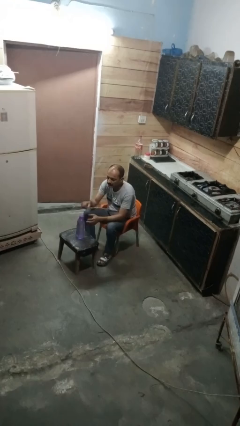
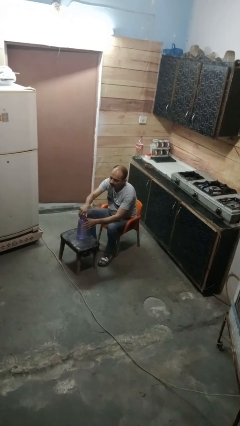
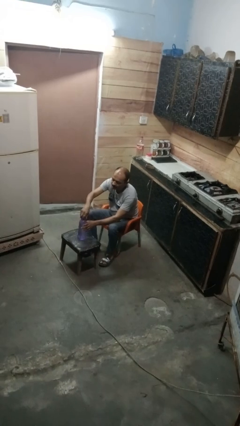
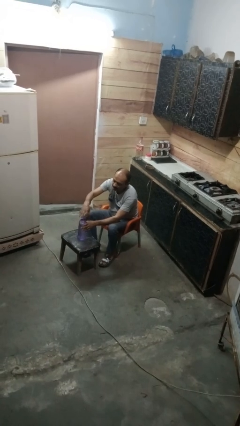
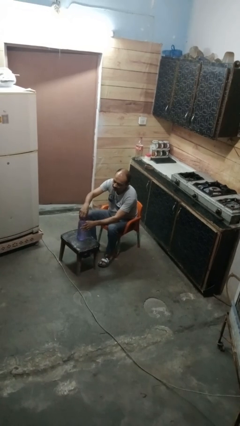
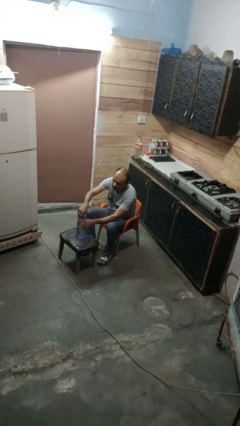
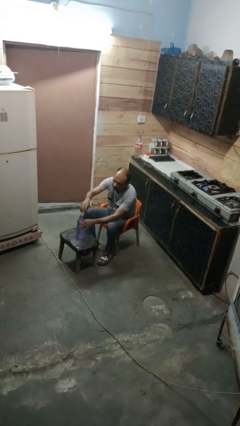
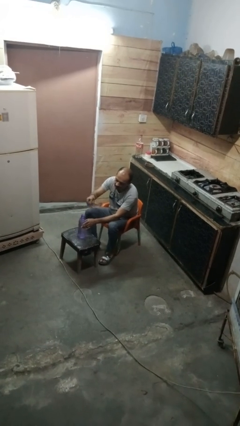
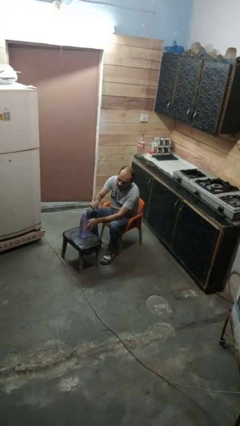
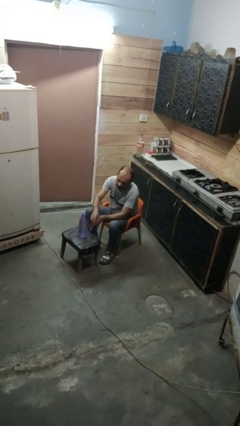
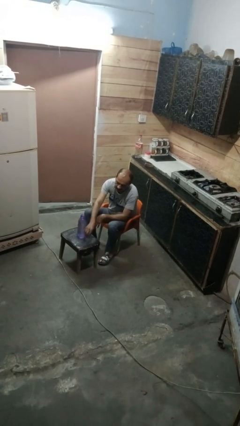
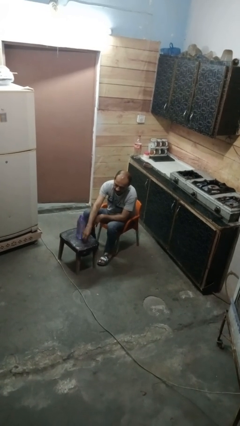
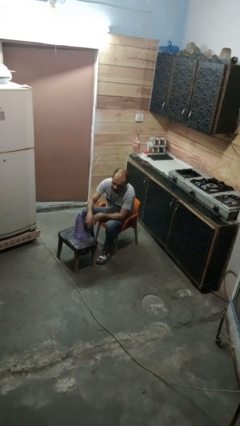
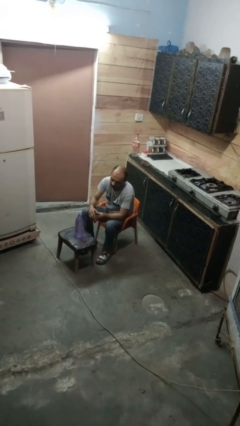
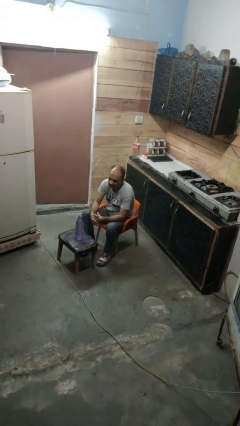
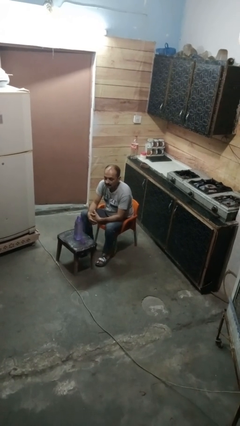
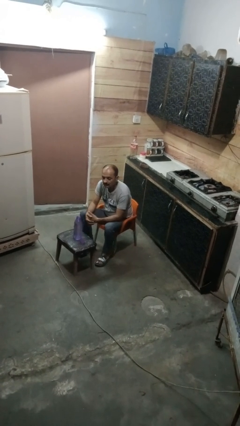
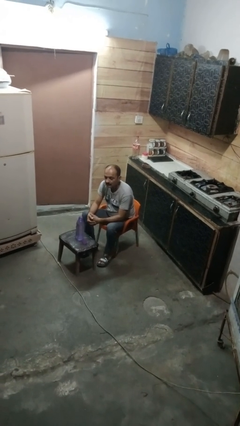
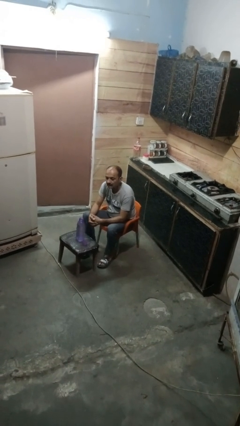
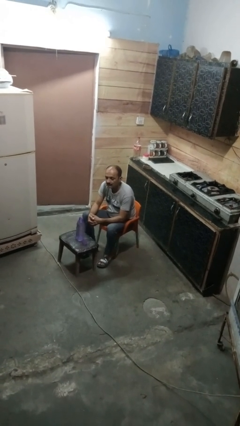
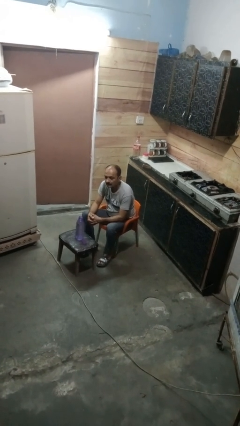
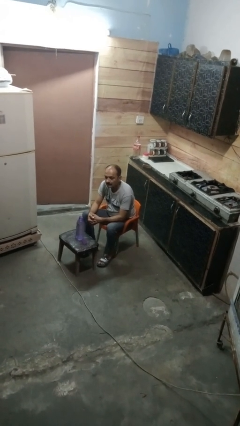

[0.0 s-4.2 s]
person unscrews lid from bottle

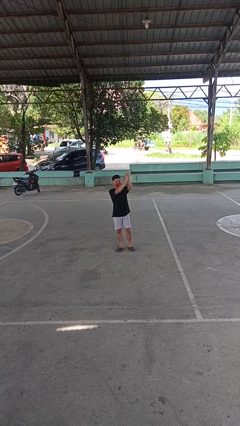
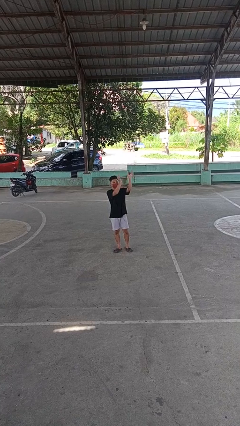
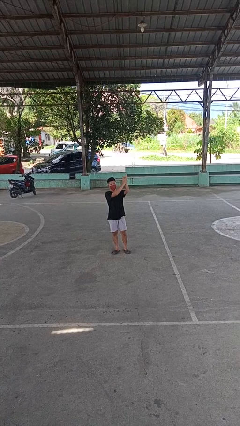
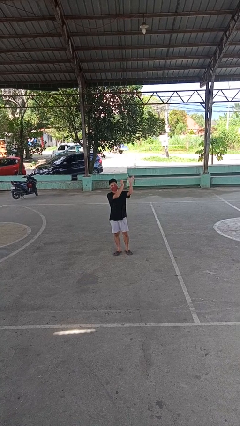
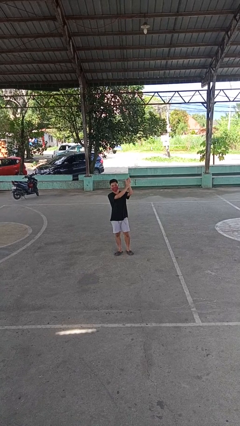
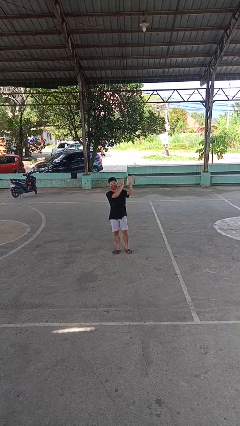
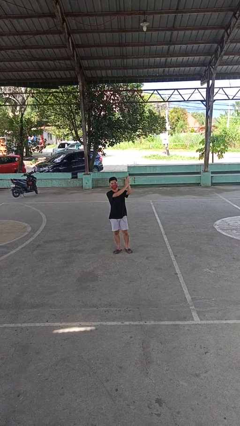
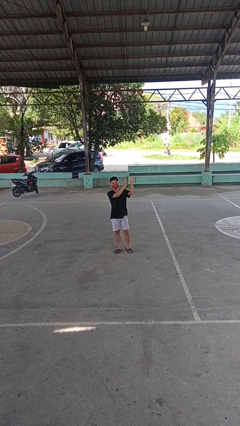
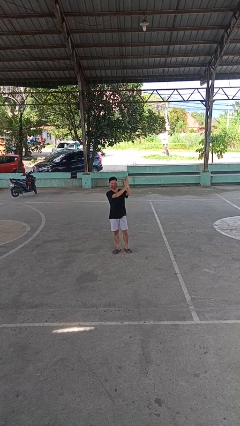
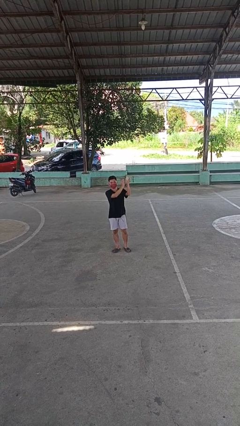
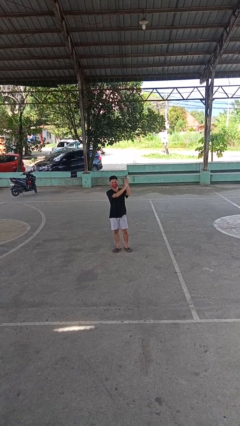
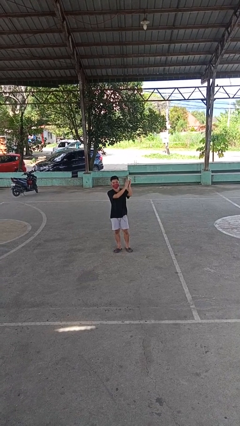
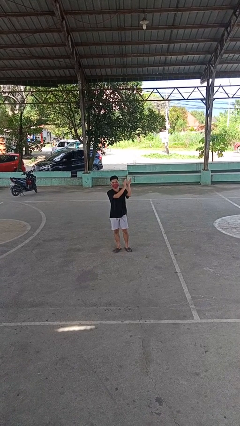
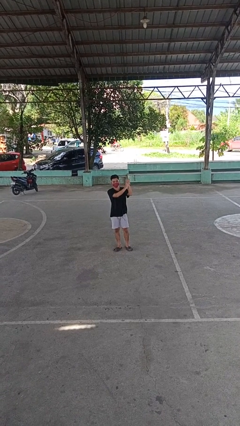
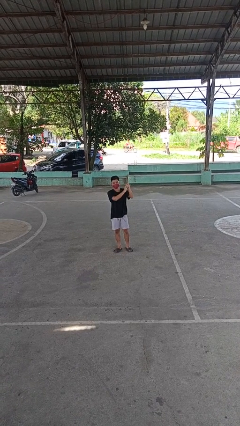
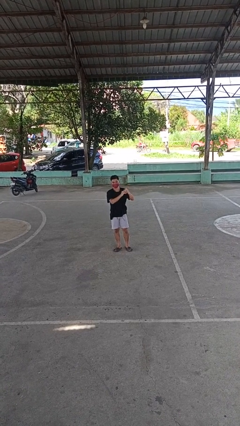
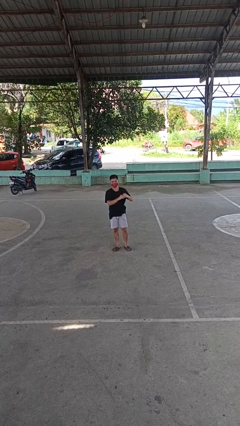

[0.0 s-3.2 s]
person claps hands

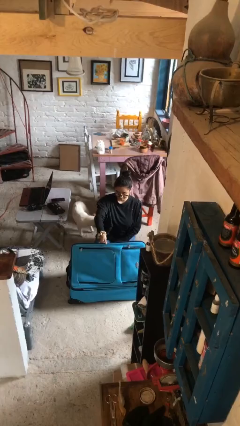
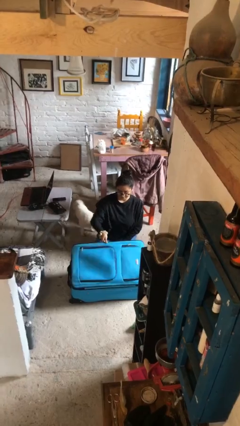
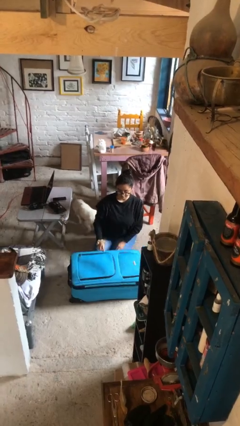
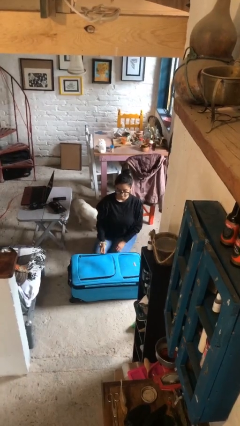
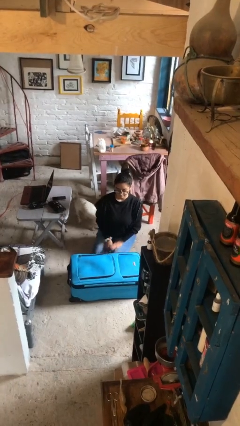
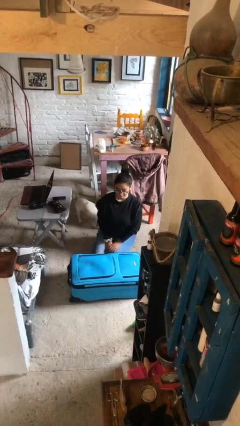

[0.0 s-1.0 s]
person closes suitcase

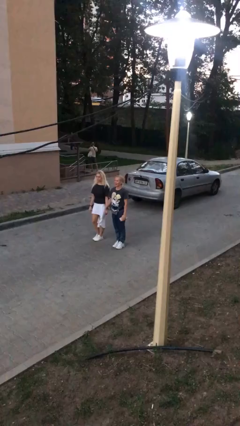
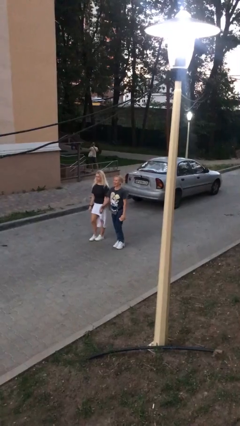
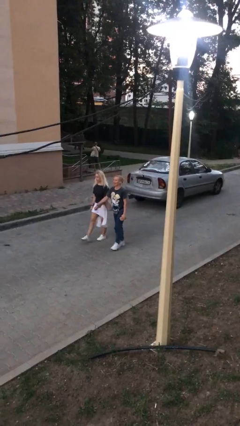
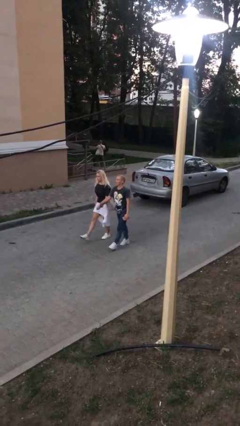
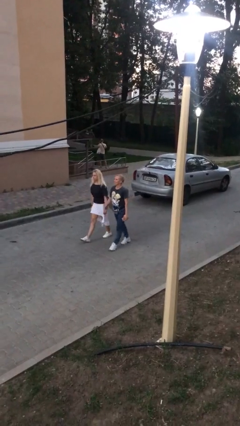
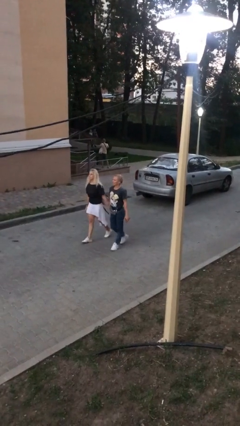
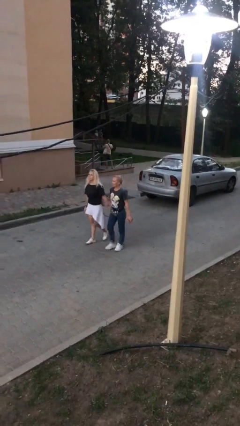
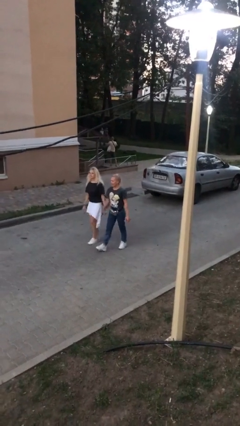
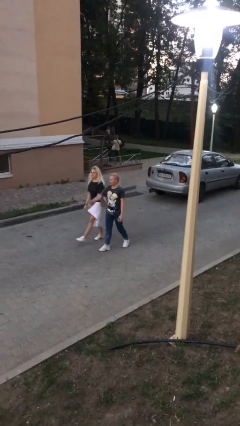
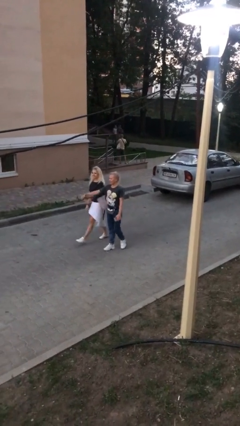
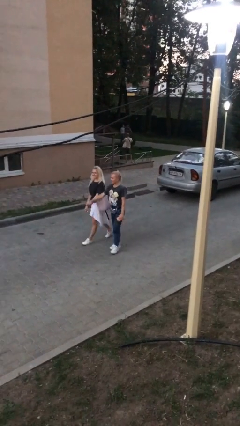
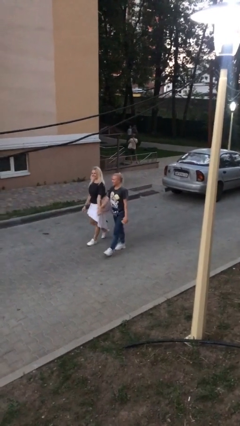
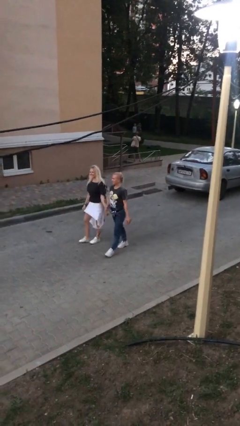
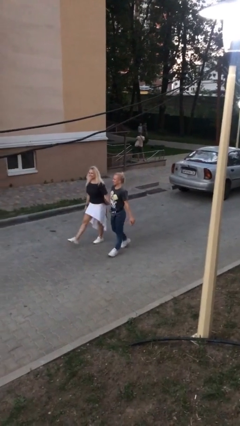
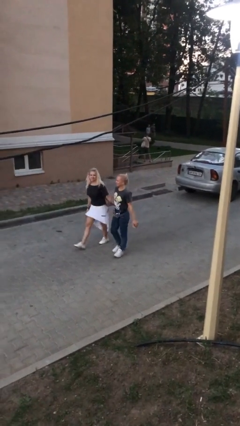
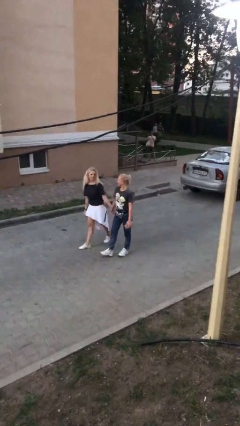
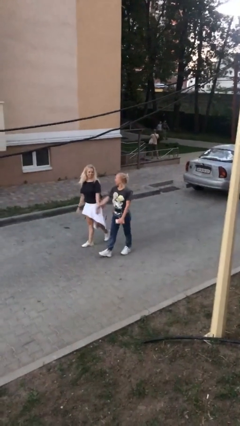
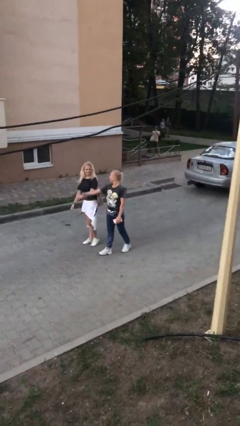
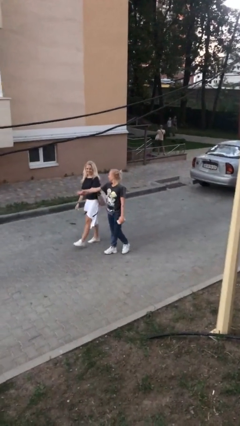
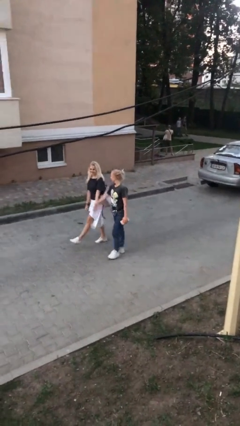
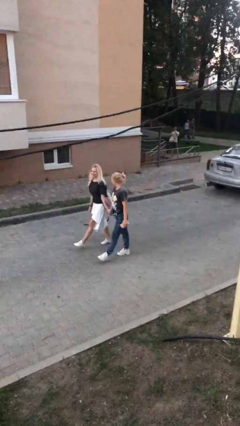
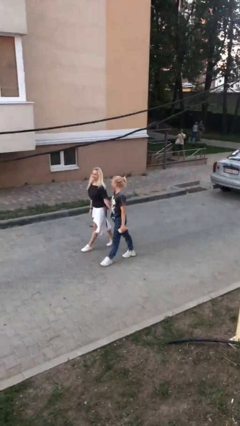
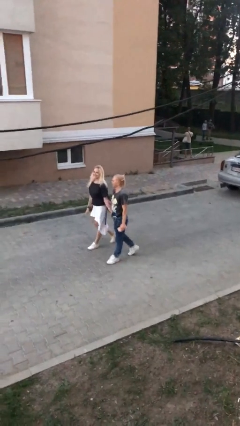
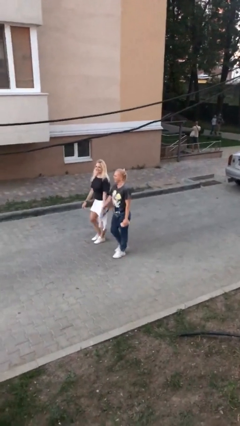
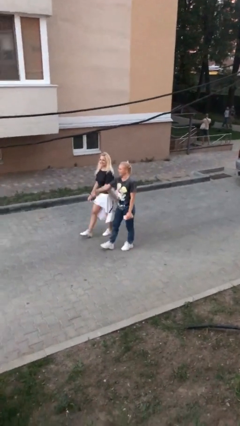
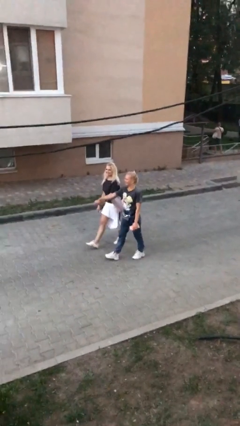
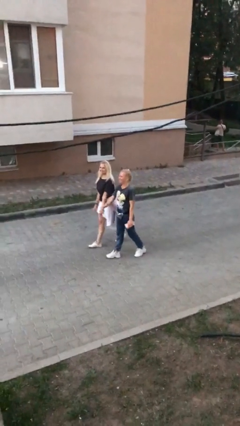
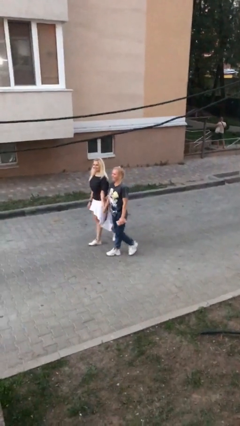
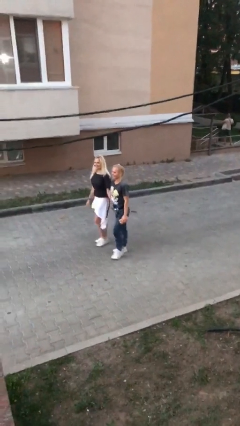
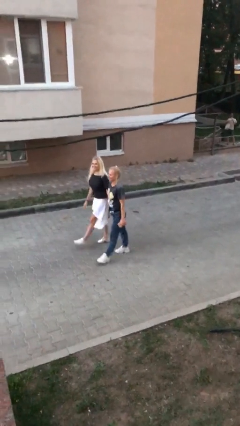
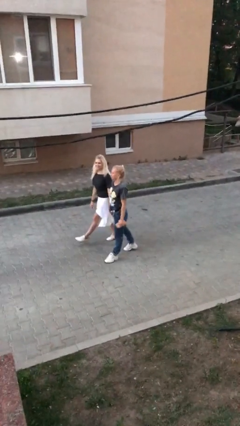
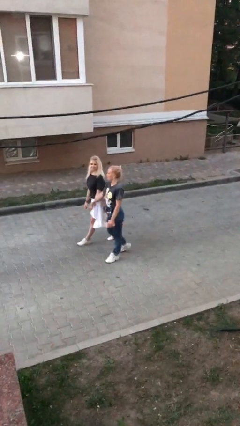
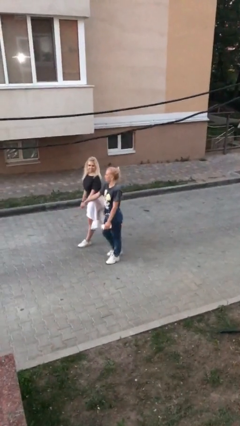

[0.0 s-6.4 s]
person holds hand

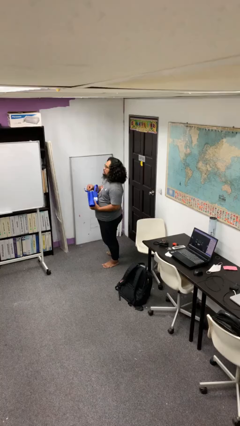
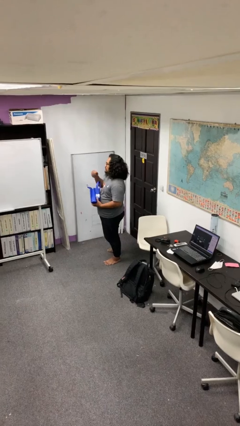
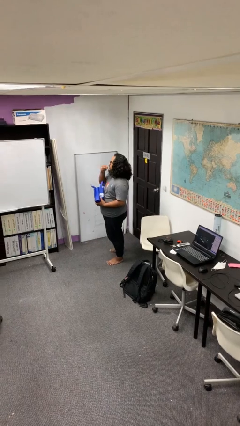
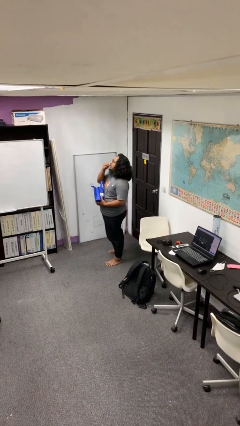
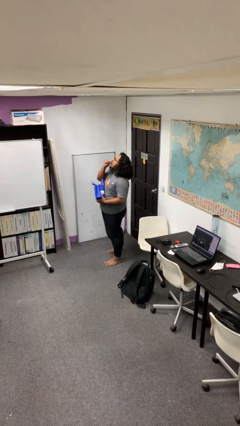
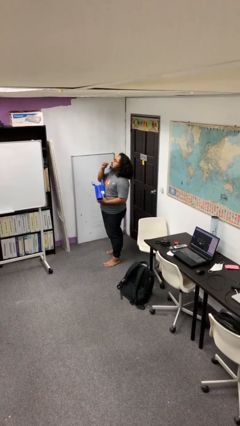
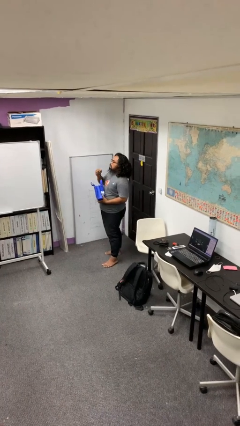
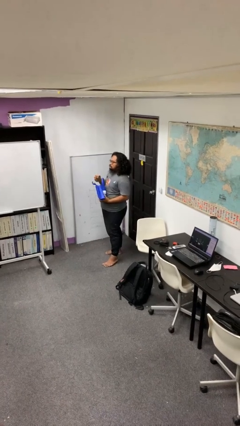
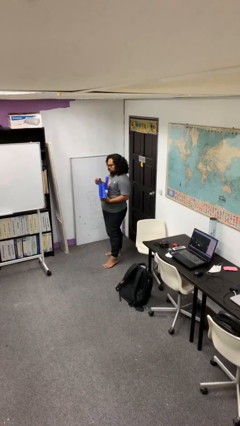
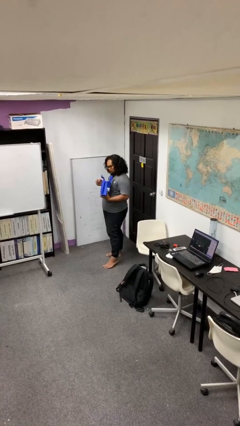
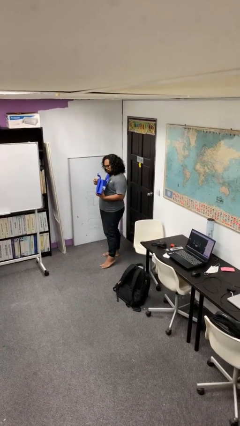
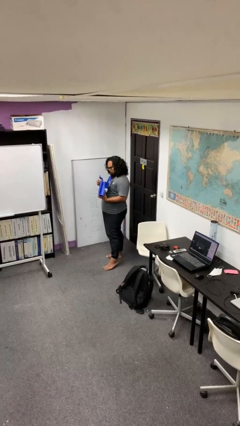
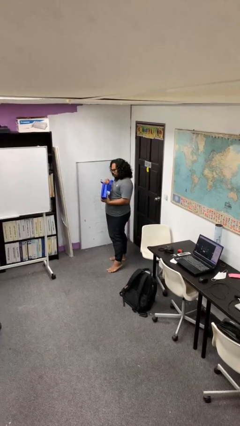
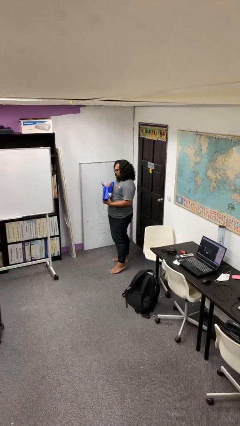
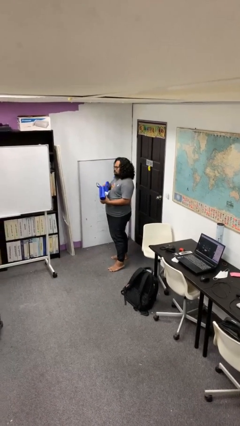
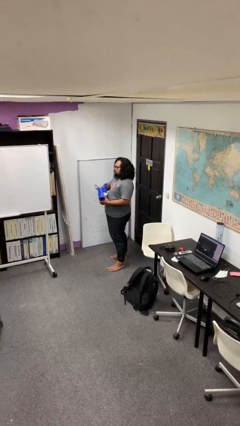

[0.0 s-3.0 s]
person eats snack from bag
